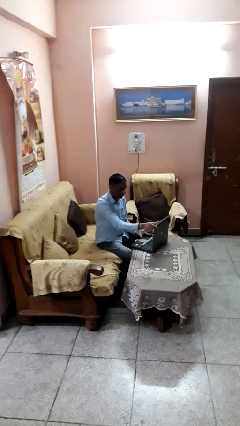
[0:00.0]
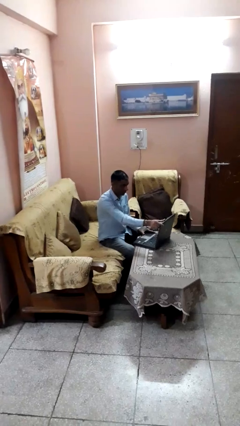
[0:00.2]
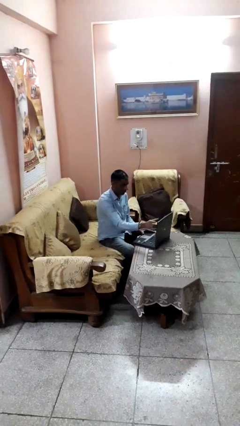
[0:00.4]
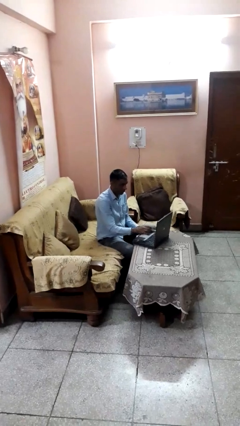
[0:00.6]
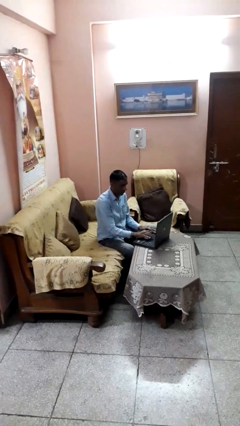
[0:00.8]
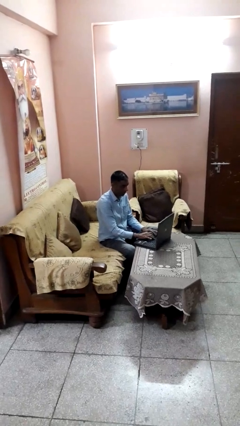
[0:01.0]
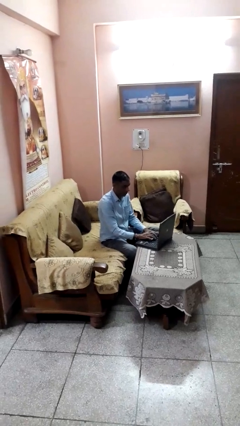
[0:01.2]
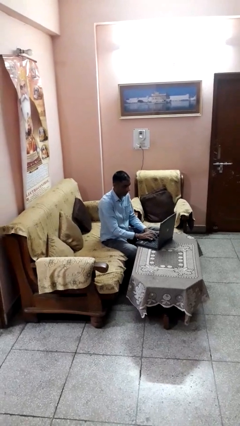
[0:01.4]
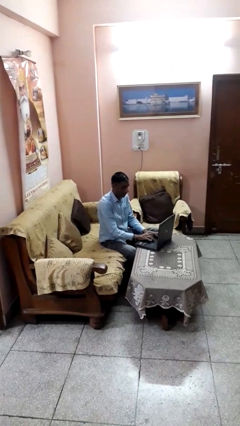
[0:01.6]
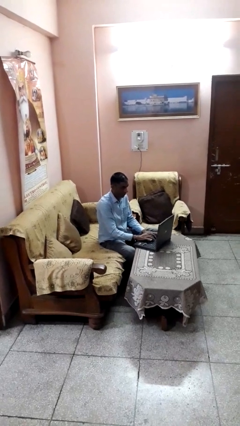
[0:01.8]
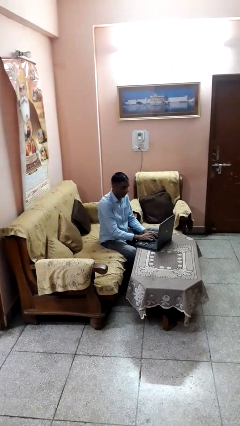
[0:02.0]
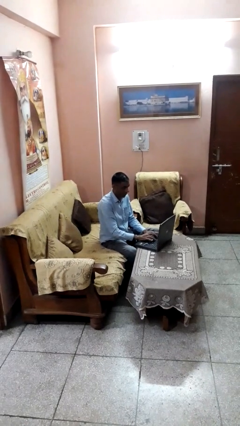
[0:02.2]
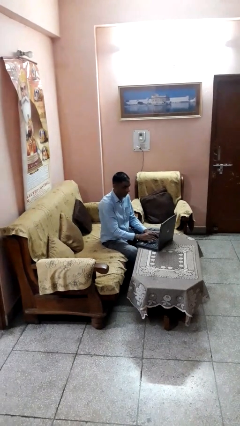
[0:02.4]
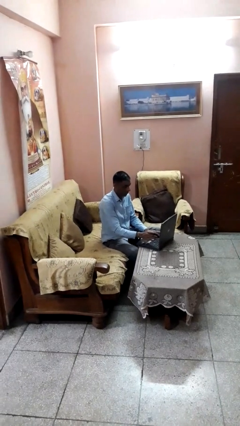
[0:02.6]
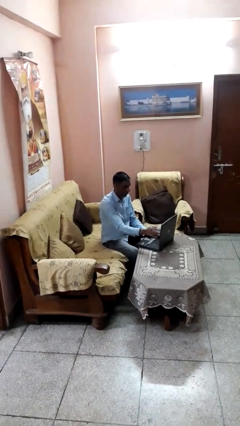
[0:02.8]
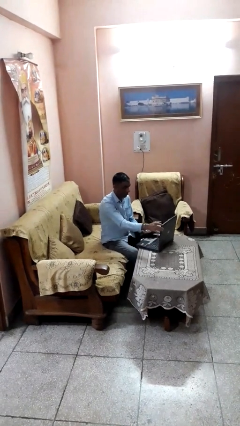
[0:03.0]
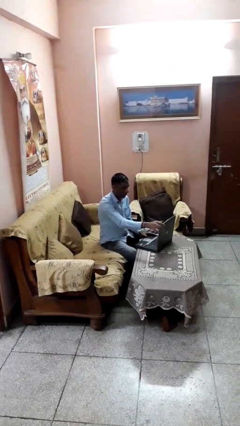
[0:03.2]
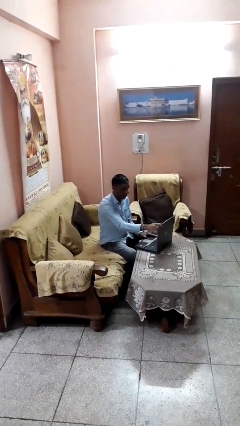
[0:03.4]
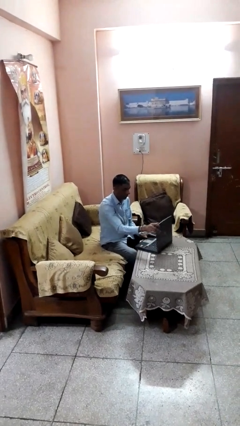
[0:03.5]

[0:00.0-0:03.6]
person interacts with laptop

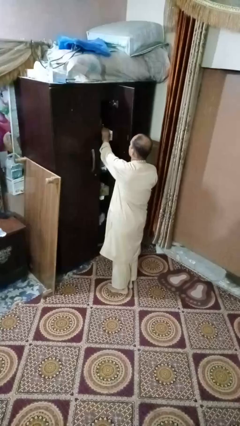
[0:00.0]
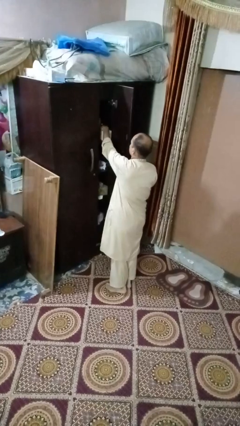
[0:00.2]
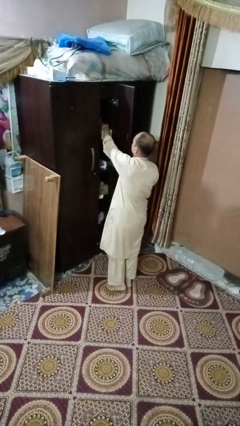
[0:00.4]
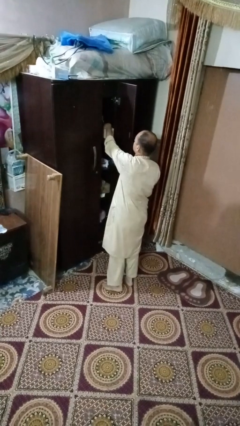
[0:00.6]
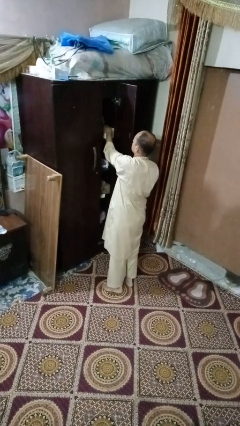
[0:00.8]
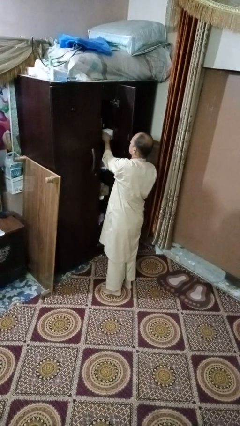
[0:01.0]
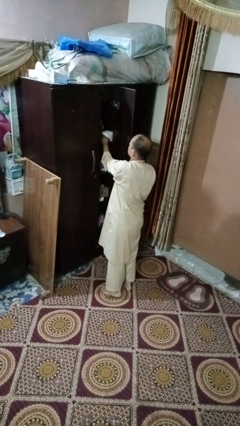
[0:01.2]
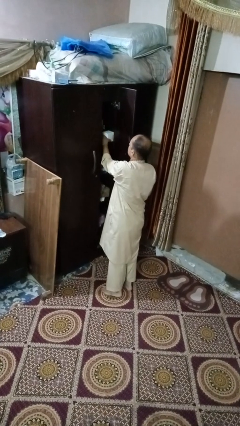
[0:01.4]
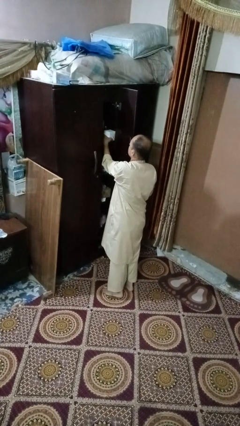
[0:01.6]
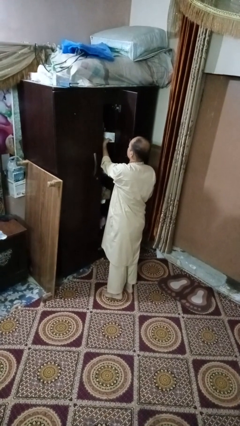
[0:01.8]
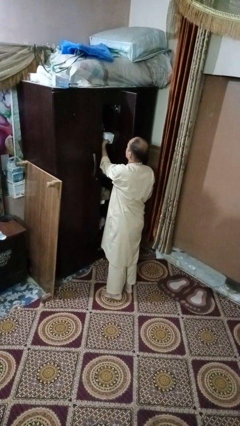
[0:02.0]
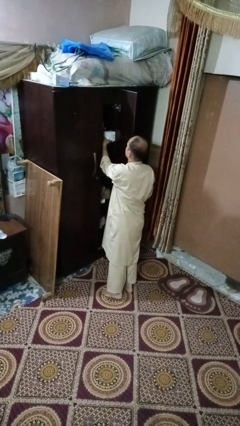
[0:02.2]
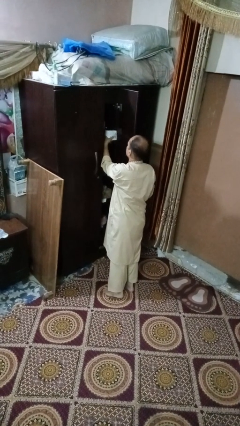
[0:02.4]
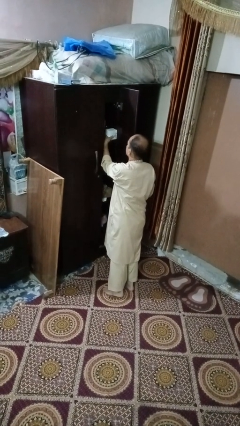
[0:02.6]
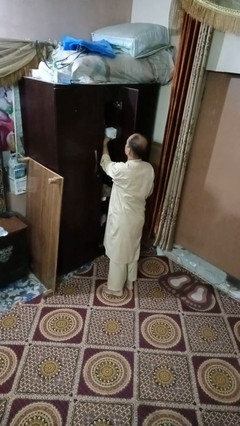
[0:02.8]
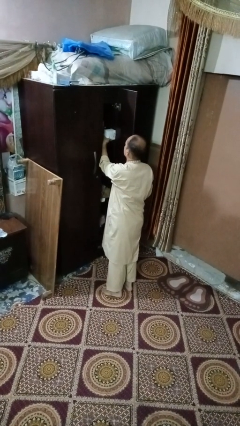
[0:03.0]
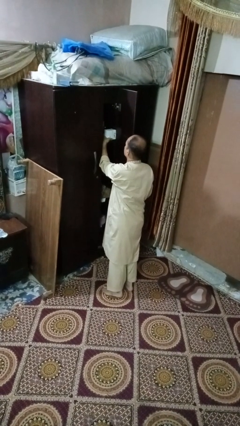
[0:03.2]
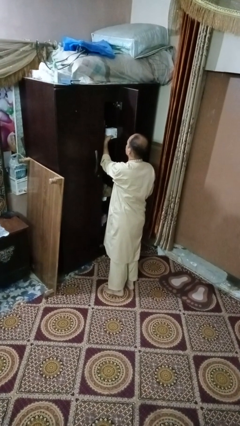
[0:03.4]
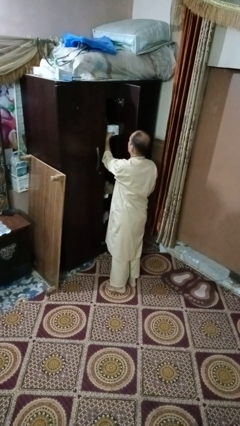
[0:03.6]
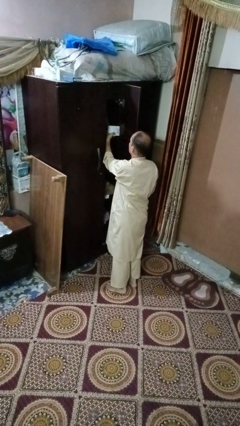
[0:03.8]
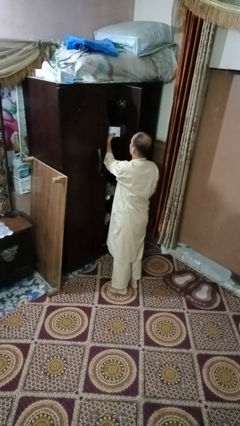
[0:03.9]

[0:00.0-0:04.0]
person picks up object from cabinet

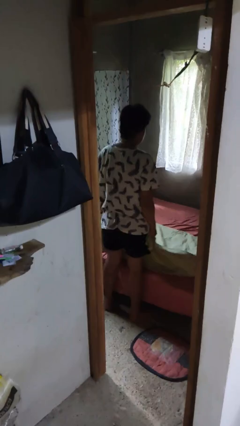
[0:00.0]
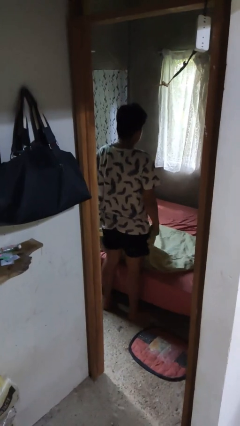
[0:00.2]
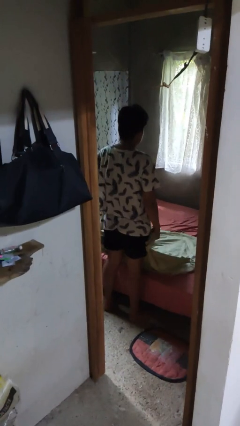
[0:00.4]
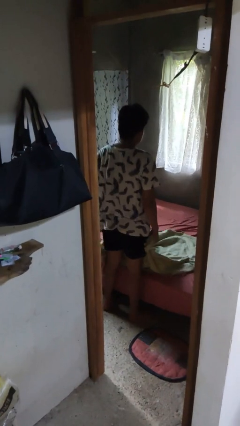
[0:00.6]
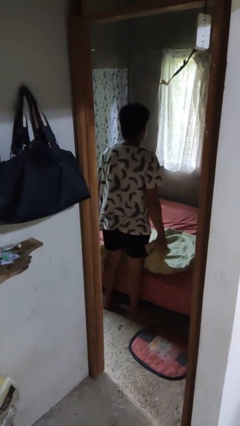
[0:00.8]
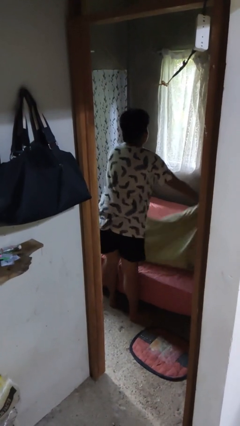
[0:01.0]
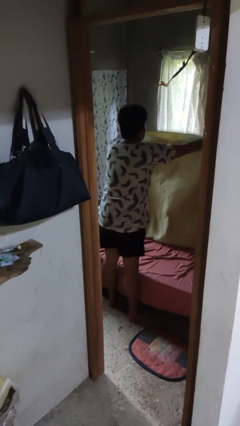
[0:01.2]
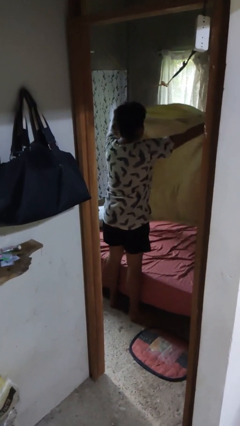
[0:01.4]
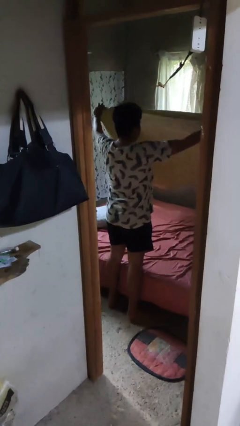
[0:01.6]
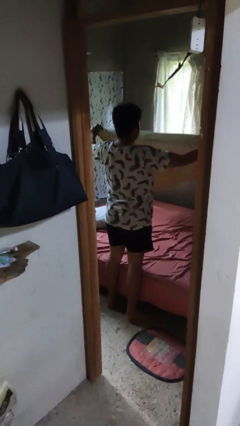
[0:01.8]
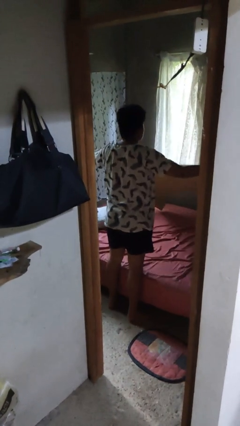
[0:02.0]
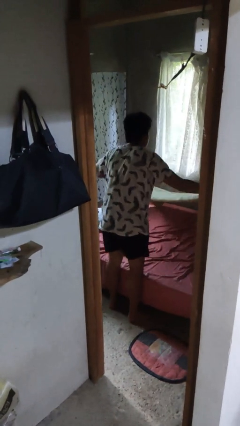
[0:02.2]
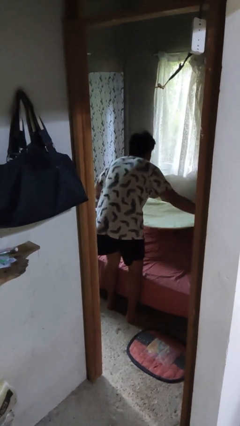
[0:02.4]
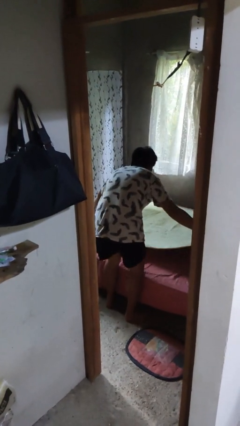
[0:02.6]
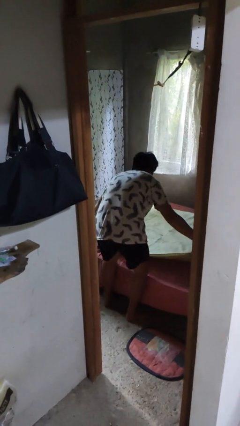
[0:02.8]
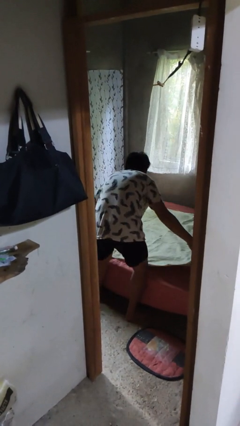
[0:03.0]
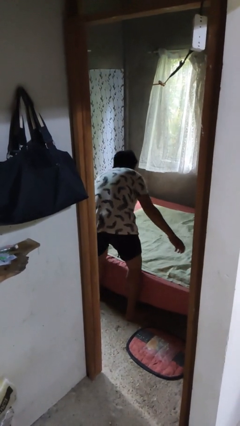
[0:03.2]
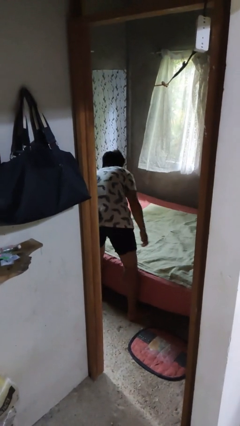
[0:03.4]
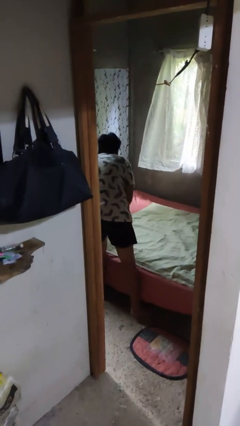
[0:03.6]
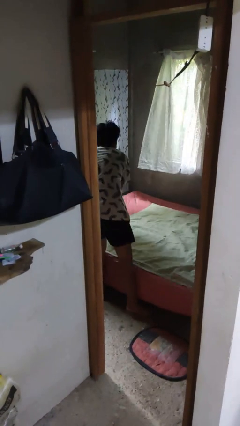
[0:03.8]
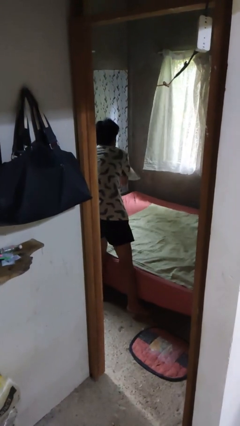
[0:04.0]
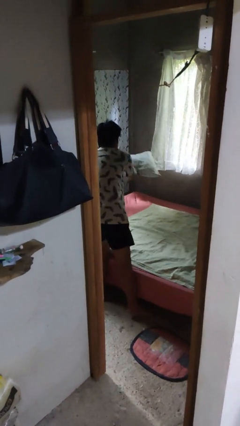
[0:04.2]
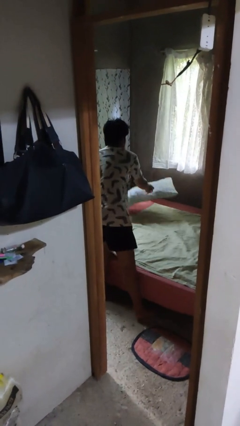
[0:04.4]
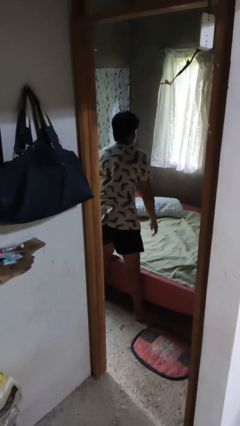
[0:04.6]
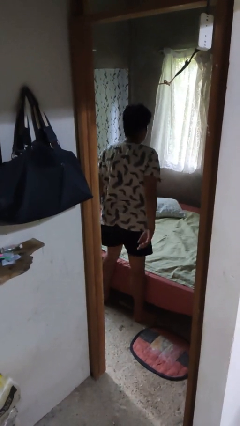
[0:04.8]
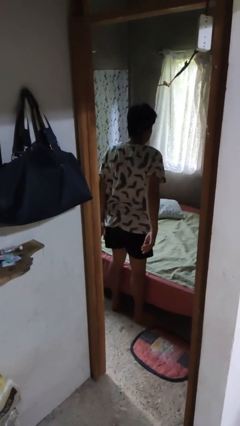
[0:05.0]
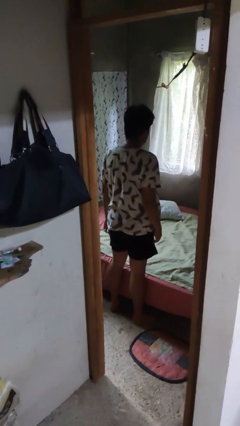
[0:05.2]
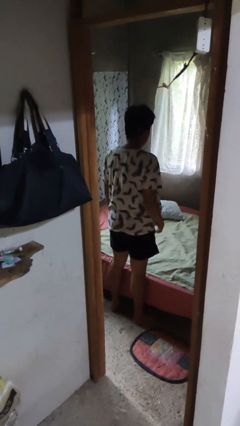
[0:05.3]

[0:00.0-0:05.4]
person makes bed

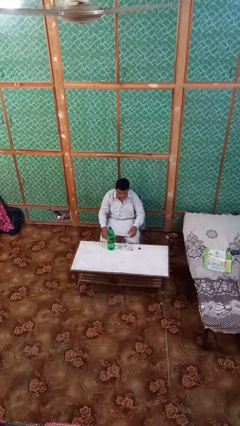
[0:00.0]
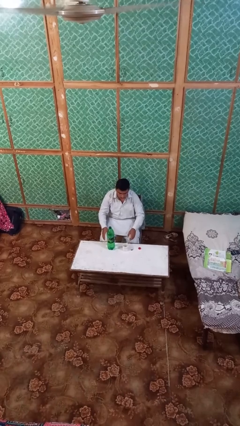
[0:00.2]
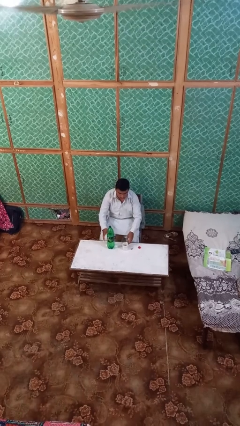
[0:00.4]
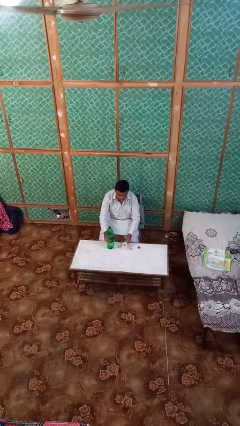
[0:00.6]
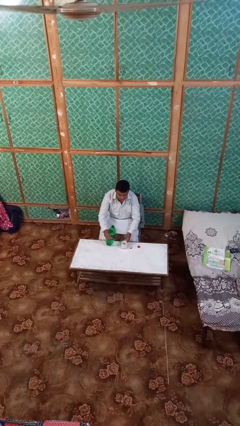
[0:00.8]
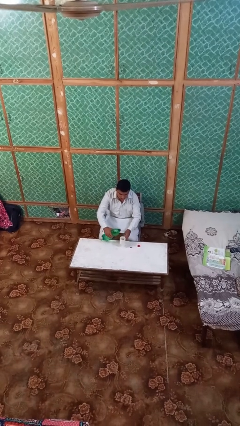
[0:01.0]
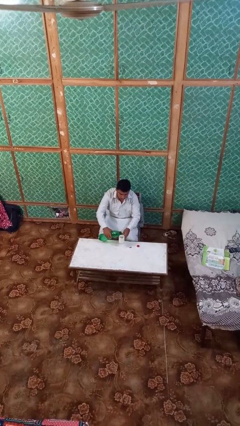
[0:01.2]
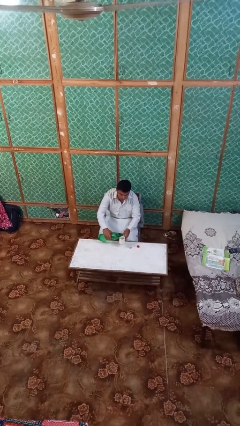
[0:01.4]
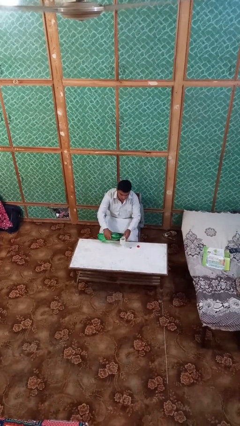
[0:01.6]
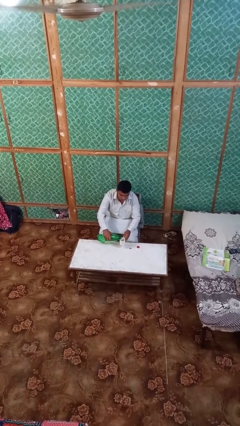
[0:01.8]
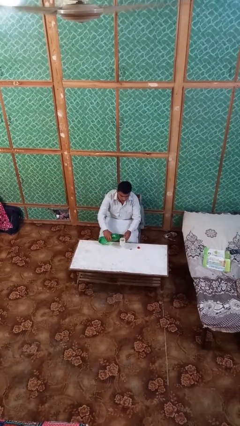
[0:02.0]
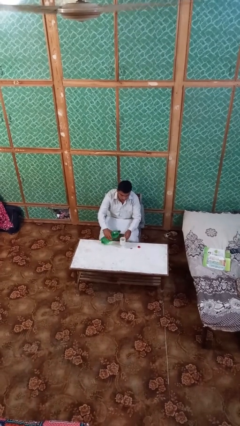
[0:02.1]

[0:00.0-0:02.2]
person pours liquid into cup

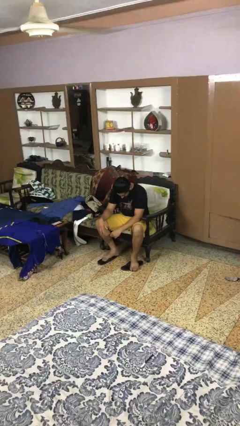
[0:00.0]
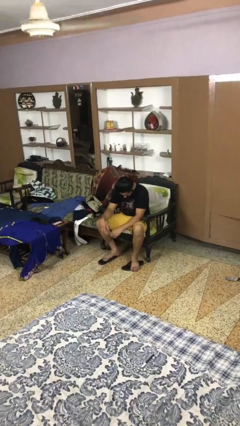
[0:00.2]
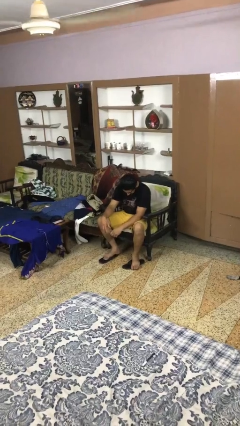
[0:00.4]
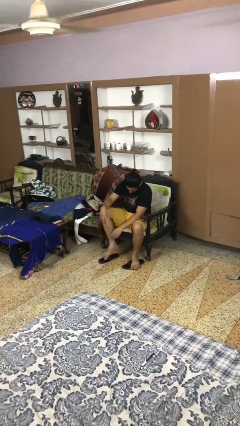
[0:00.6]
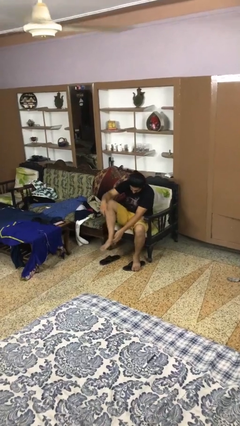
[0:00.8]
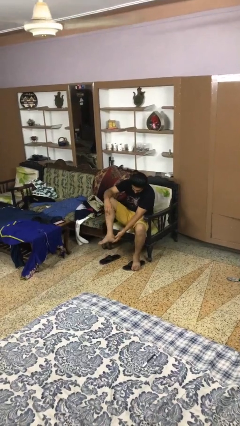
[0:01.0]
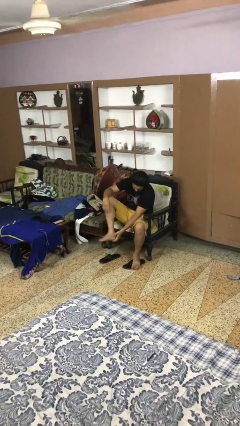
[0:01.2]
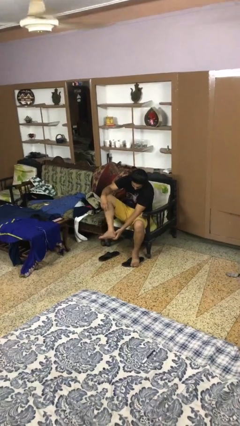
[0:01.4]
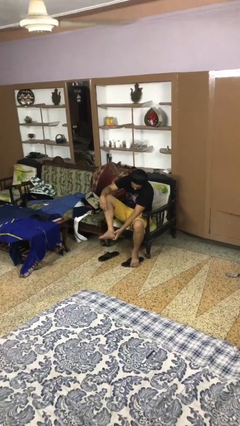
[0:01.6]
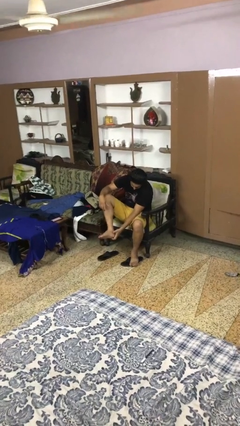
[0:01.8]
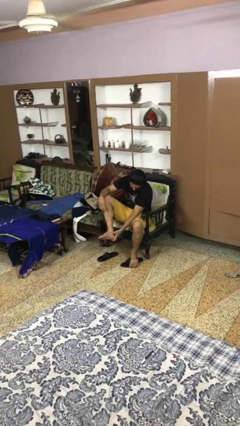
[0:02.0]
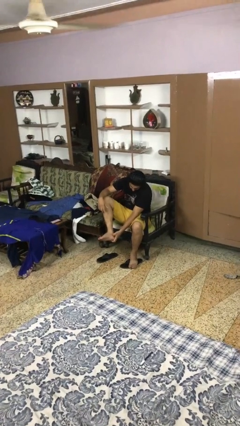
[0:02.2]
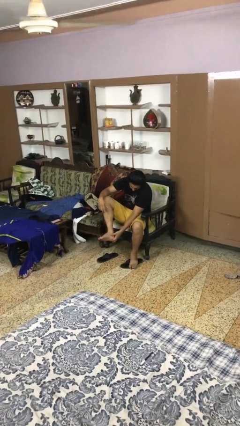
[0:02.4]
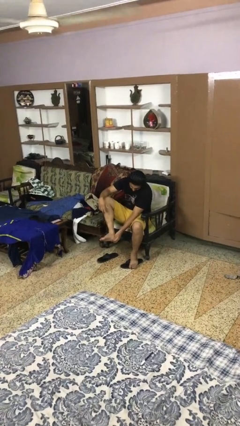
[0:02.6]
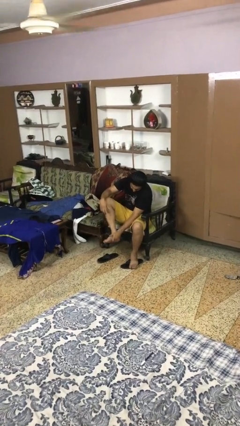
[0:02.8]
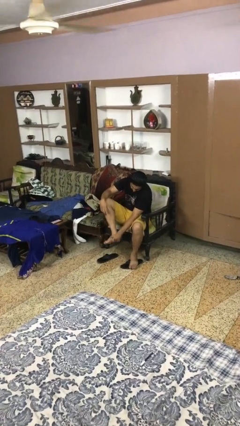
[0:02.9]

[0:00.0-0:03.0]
person rubs foot
